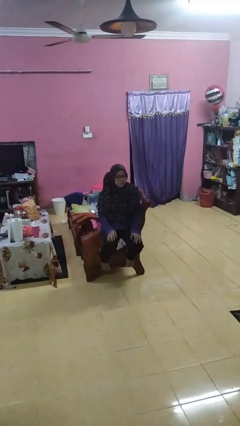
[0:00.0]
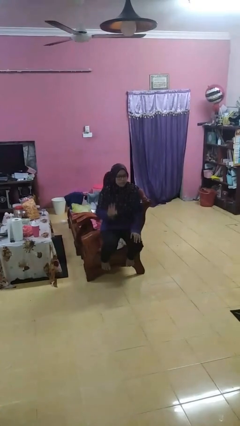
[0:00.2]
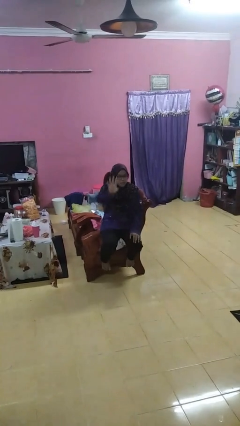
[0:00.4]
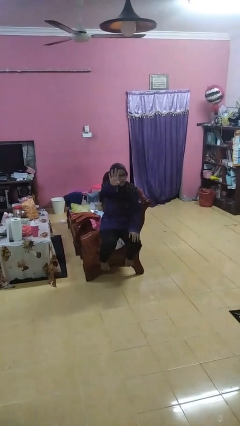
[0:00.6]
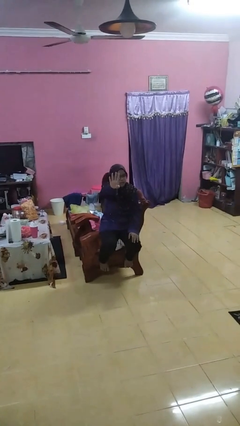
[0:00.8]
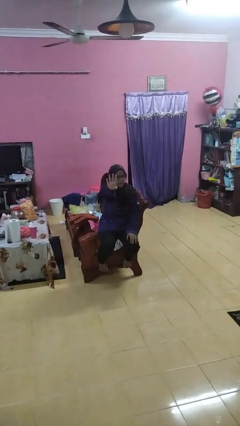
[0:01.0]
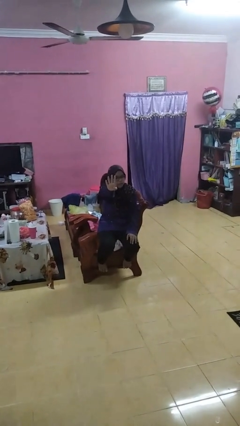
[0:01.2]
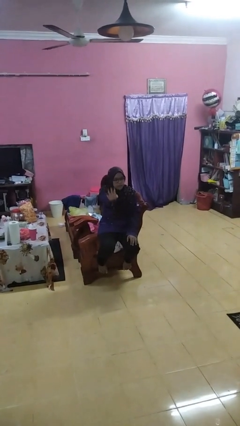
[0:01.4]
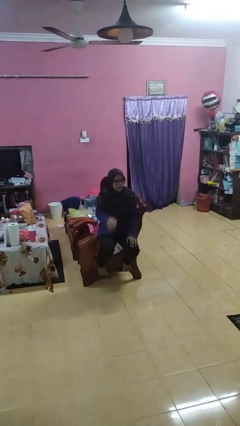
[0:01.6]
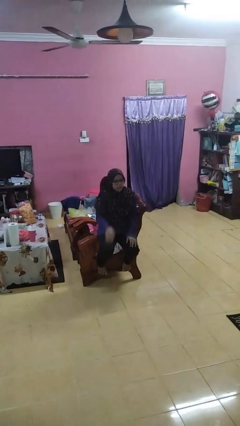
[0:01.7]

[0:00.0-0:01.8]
person gestures number four

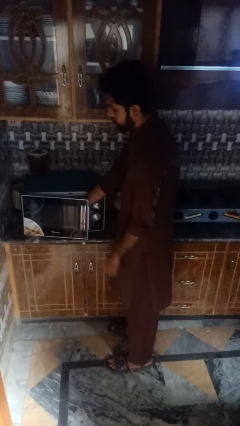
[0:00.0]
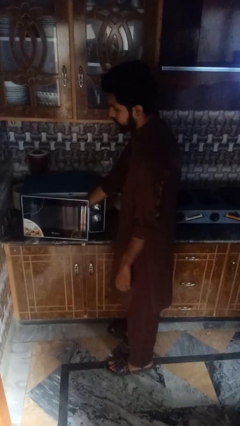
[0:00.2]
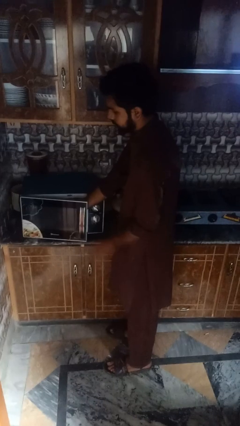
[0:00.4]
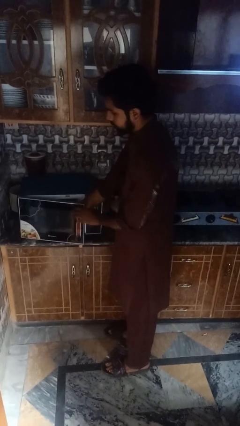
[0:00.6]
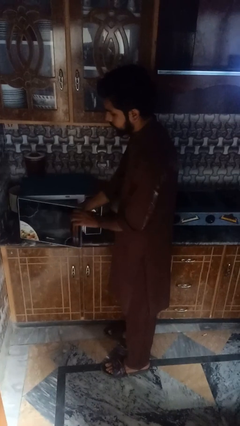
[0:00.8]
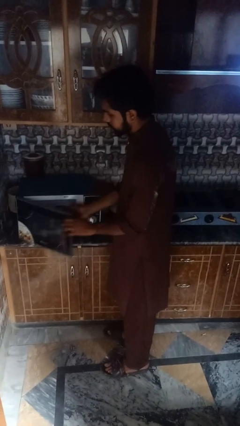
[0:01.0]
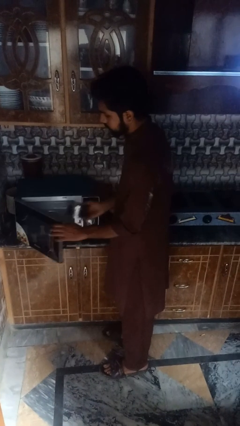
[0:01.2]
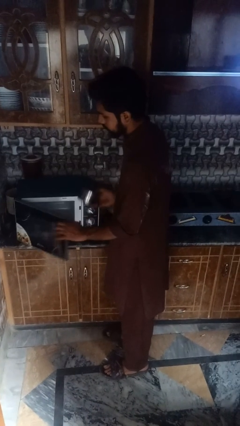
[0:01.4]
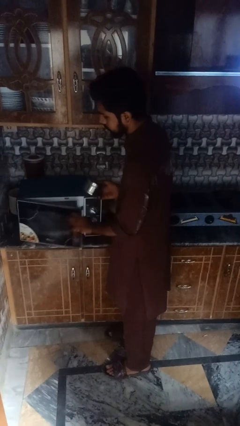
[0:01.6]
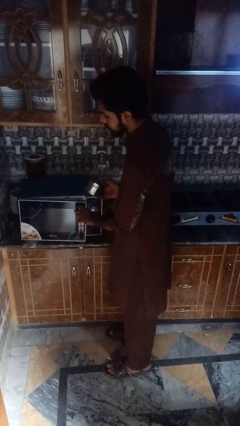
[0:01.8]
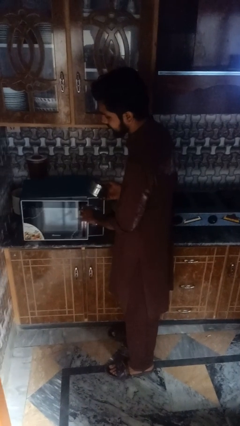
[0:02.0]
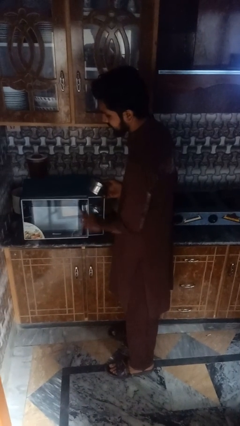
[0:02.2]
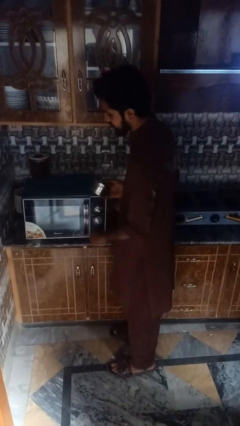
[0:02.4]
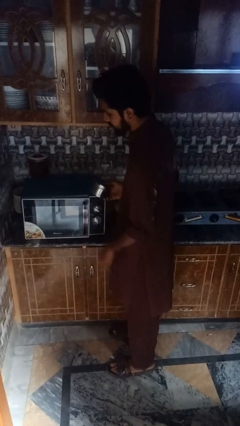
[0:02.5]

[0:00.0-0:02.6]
person takes object from microwave

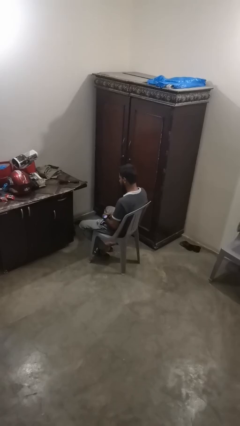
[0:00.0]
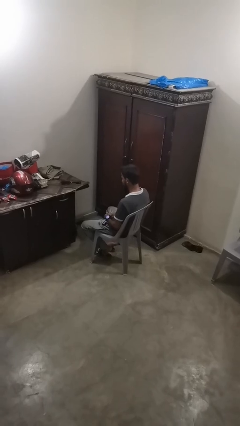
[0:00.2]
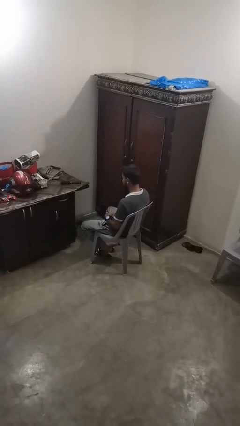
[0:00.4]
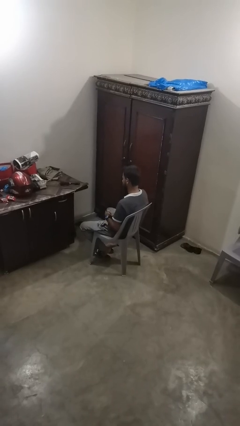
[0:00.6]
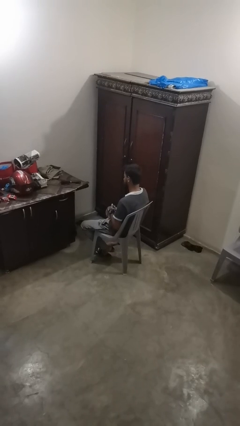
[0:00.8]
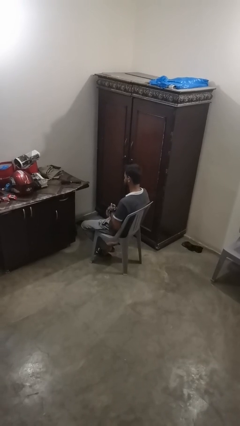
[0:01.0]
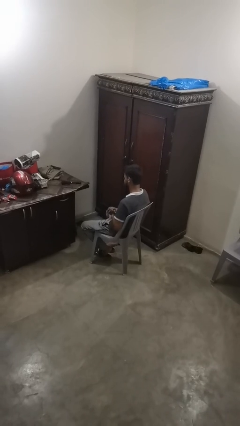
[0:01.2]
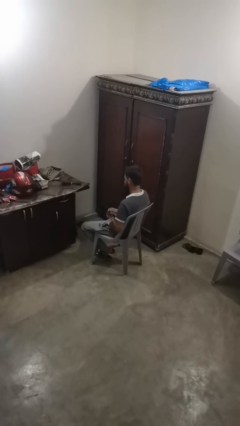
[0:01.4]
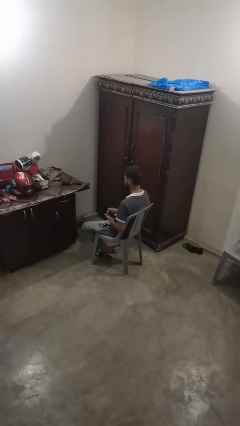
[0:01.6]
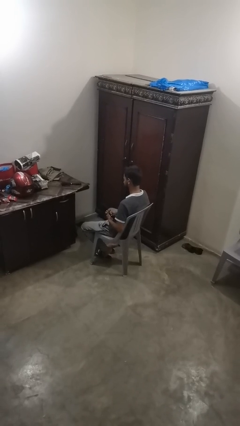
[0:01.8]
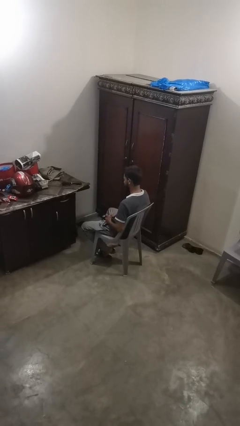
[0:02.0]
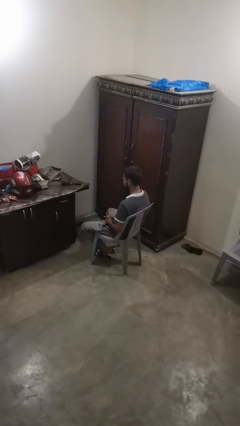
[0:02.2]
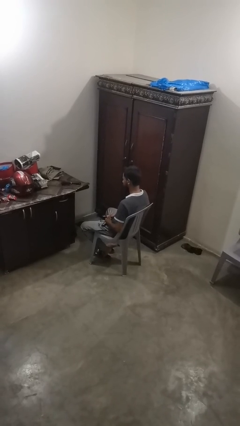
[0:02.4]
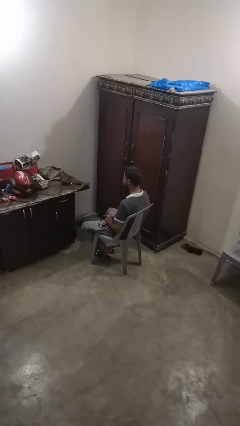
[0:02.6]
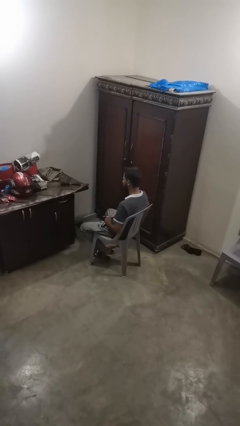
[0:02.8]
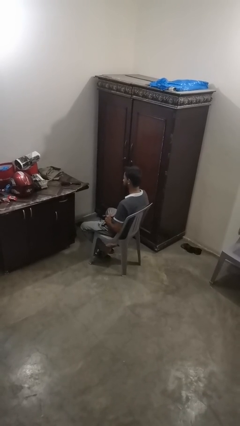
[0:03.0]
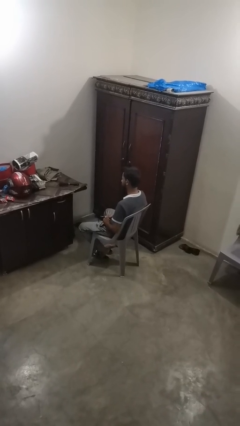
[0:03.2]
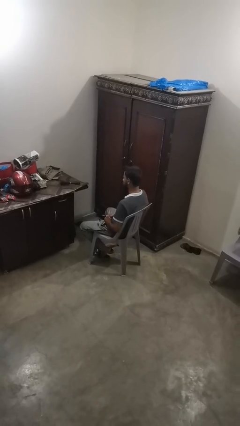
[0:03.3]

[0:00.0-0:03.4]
person takes off wristwatch

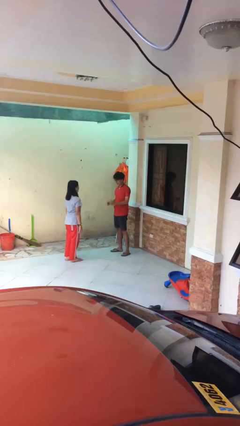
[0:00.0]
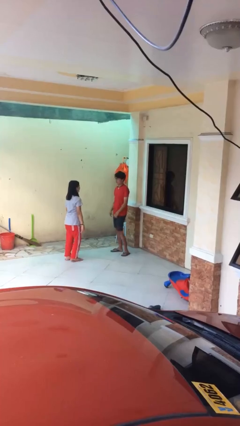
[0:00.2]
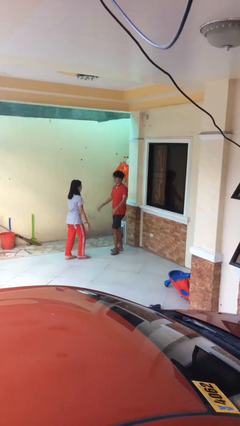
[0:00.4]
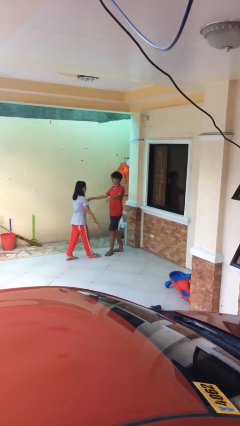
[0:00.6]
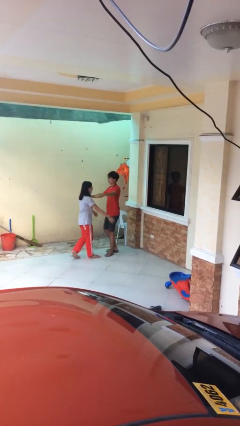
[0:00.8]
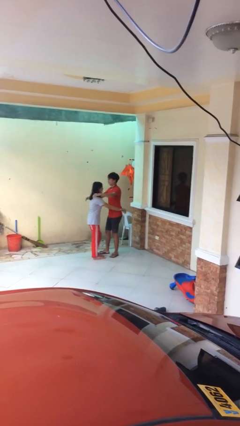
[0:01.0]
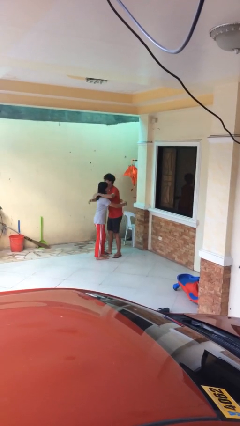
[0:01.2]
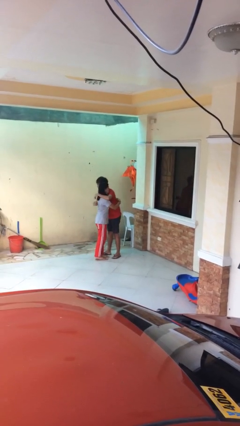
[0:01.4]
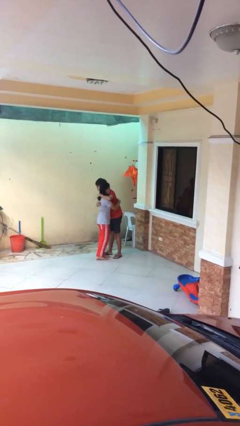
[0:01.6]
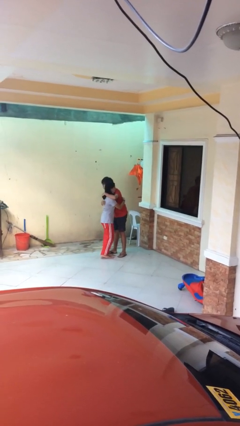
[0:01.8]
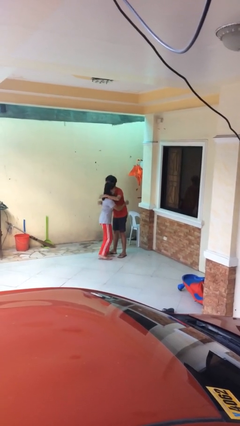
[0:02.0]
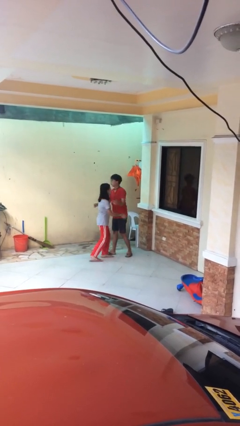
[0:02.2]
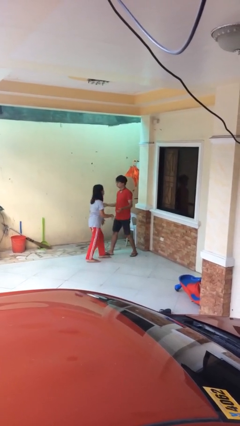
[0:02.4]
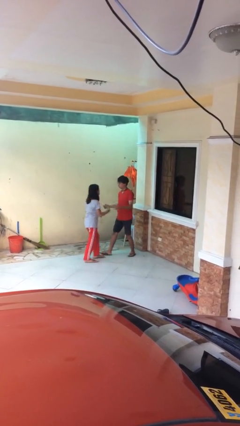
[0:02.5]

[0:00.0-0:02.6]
person embraces person

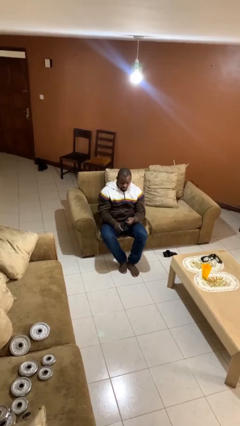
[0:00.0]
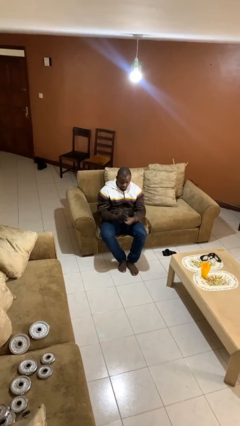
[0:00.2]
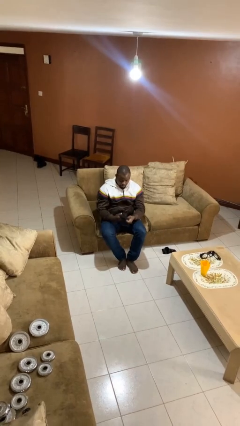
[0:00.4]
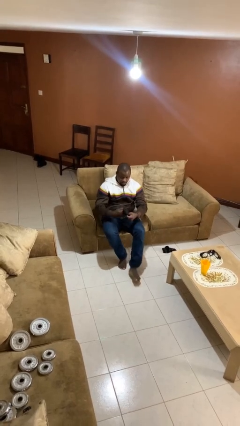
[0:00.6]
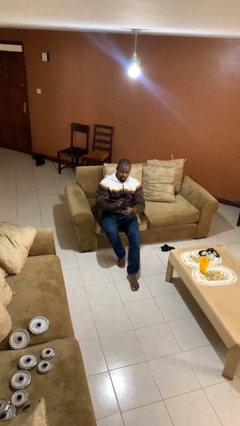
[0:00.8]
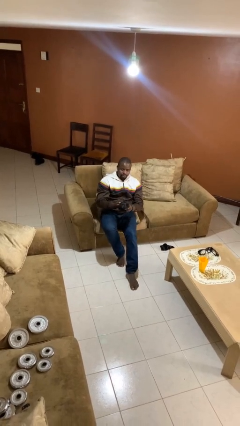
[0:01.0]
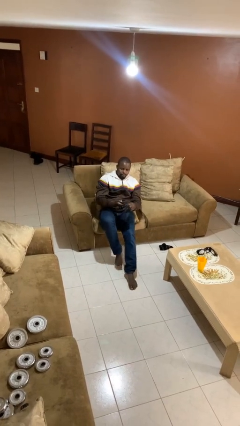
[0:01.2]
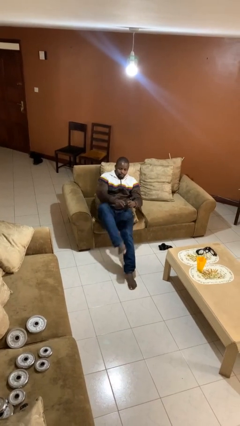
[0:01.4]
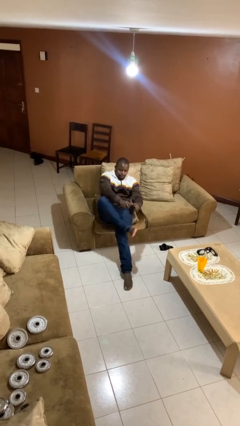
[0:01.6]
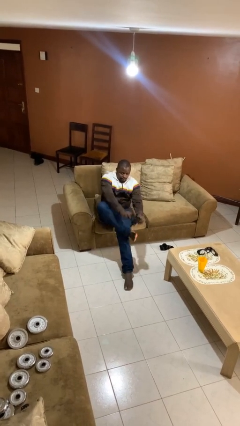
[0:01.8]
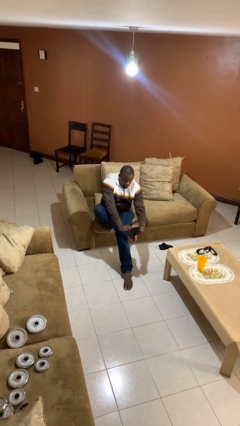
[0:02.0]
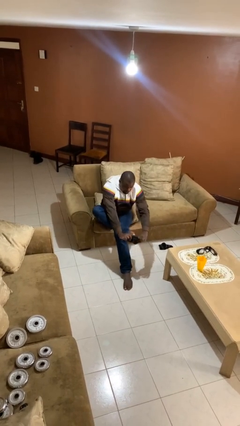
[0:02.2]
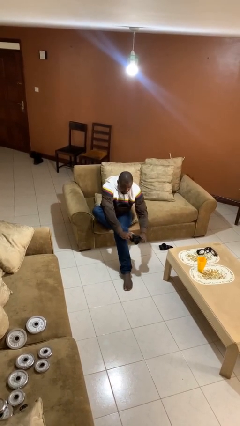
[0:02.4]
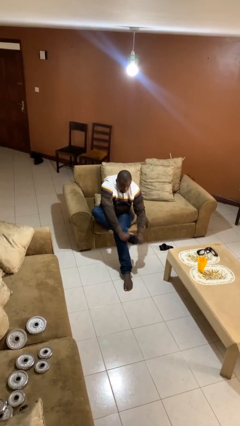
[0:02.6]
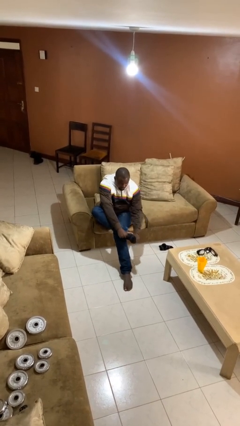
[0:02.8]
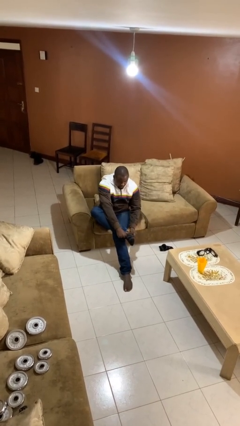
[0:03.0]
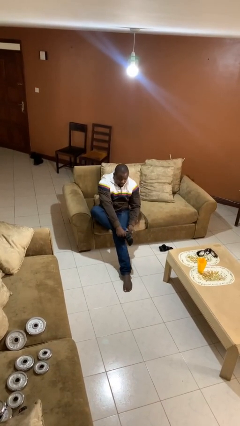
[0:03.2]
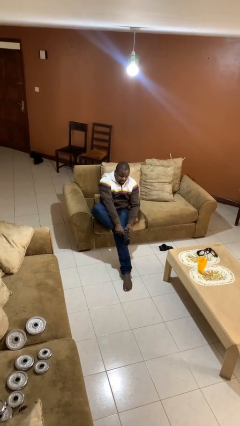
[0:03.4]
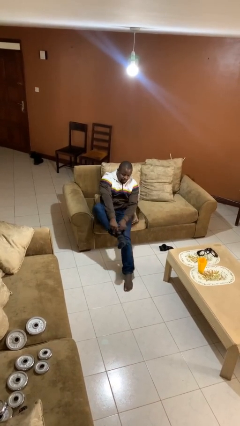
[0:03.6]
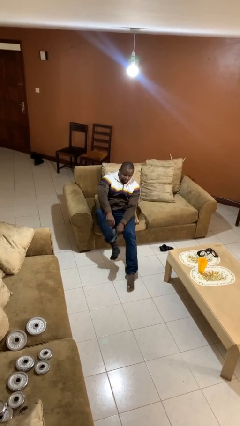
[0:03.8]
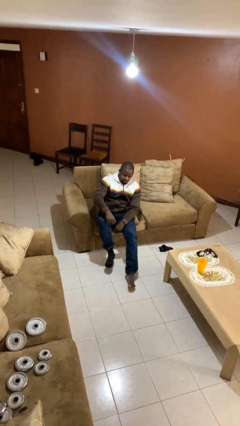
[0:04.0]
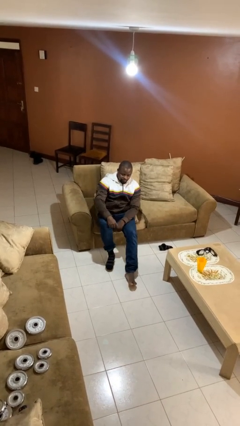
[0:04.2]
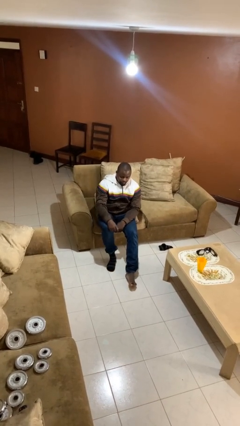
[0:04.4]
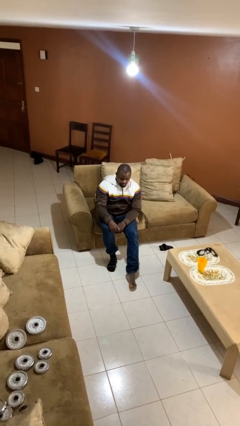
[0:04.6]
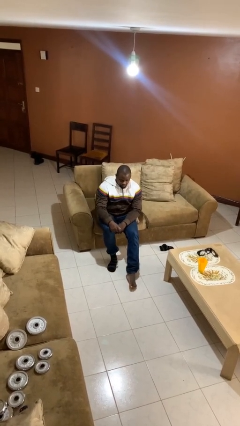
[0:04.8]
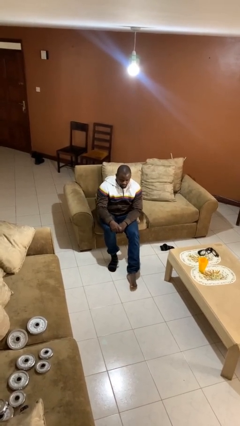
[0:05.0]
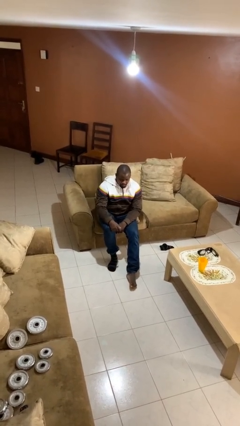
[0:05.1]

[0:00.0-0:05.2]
person puts on socks

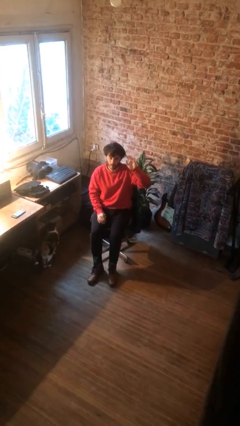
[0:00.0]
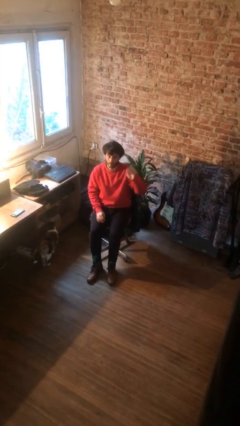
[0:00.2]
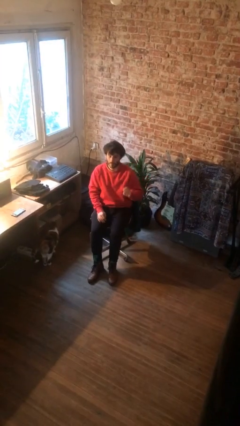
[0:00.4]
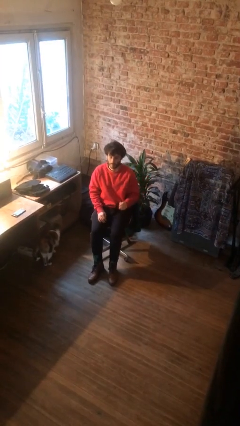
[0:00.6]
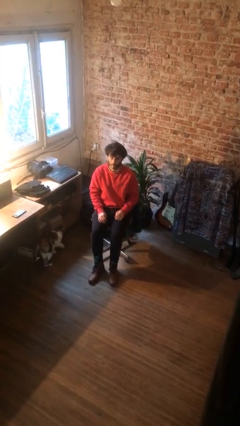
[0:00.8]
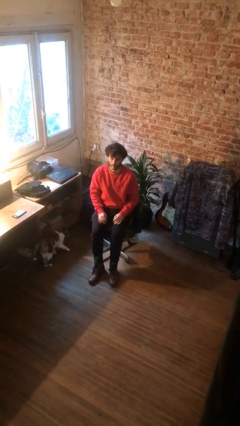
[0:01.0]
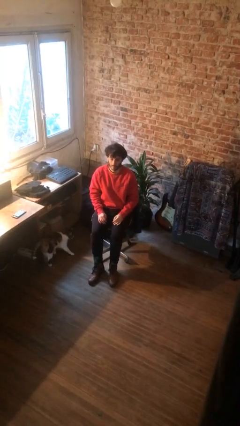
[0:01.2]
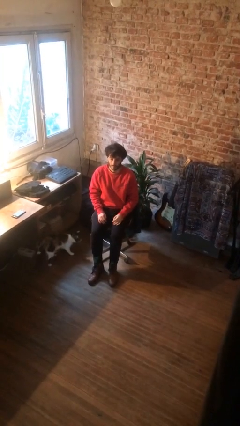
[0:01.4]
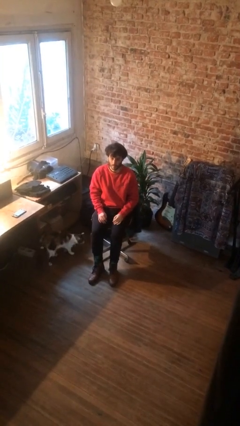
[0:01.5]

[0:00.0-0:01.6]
person gestures lower hand

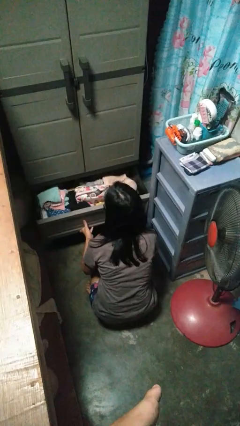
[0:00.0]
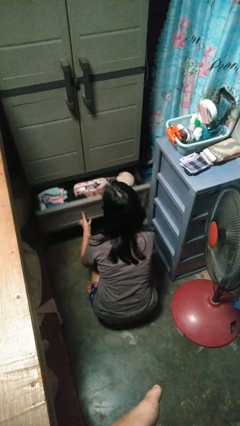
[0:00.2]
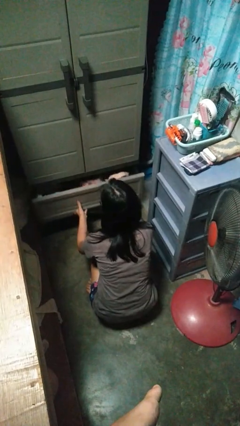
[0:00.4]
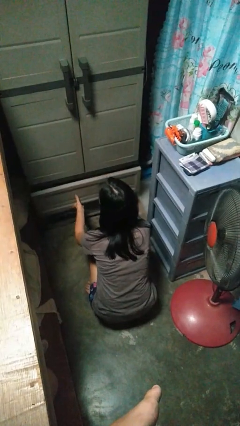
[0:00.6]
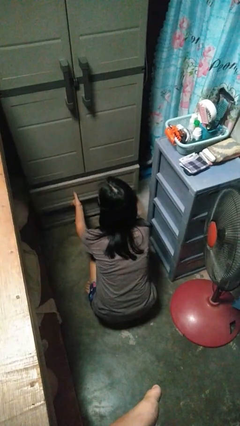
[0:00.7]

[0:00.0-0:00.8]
person closes dresser drawer
